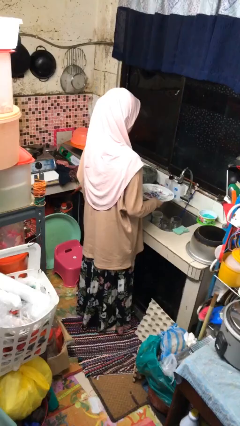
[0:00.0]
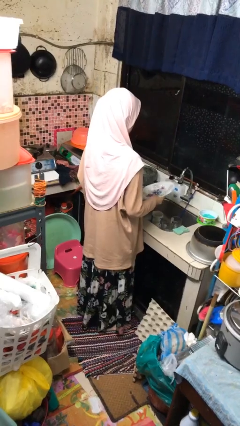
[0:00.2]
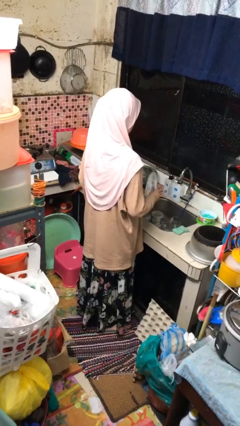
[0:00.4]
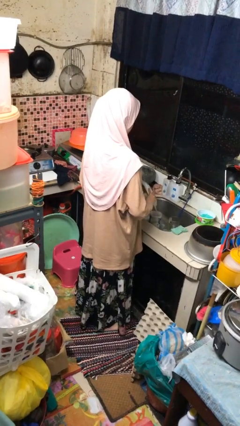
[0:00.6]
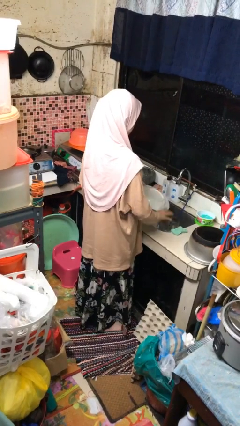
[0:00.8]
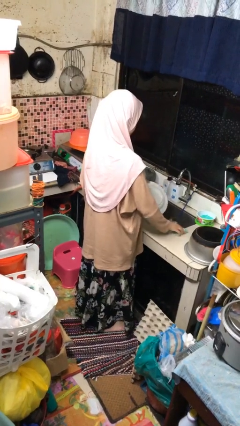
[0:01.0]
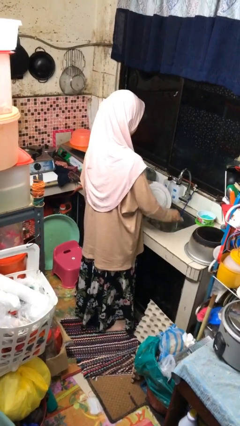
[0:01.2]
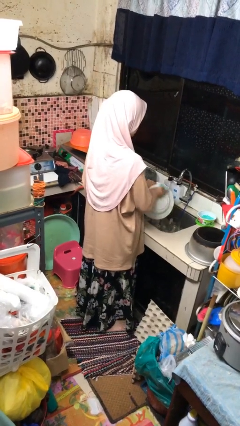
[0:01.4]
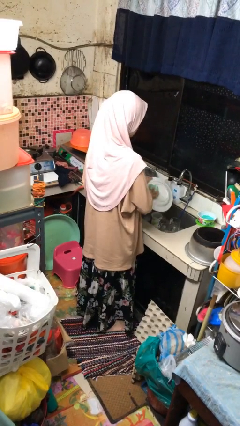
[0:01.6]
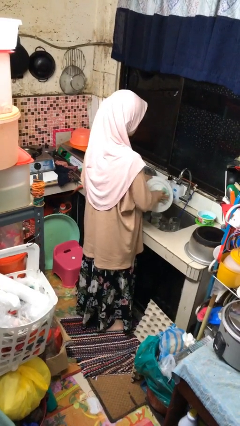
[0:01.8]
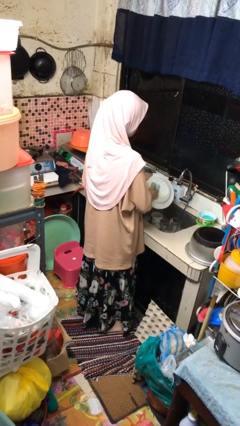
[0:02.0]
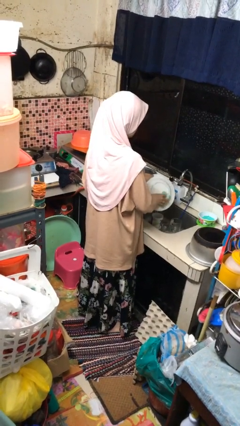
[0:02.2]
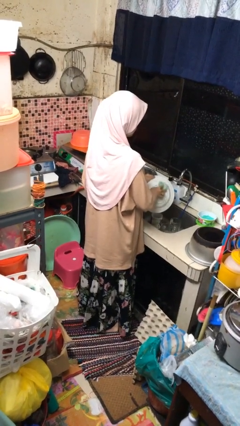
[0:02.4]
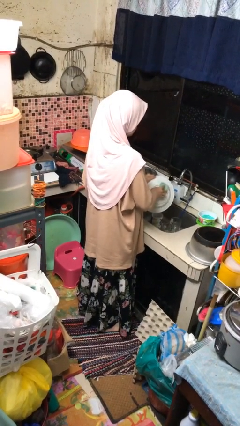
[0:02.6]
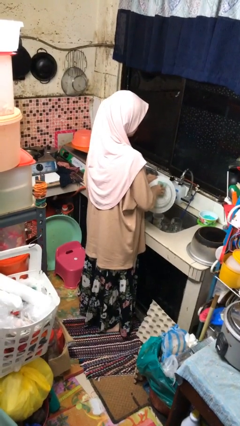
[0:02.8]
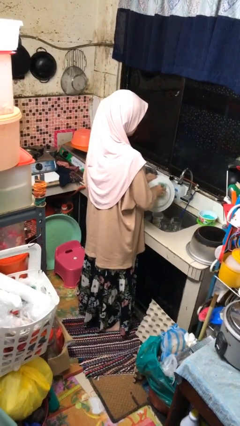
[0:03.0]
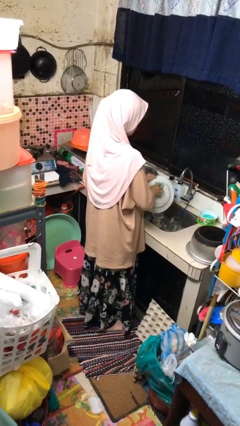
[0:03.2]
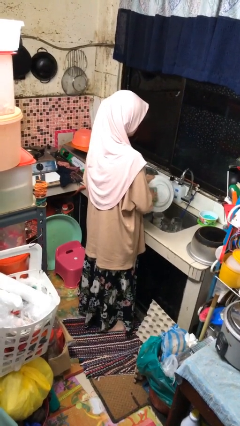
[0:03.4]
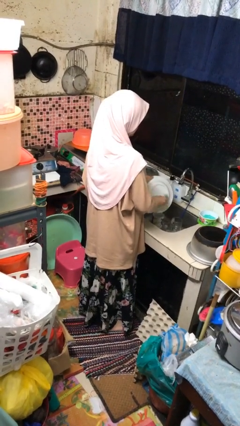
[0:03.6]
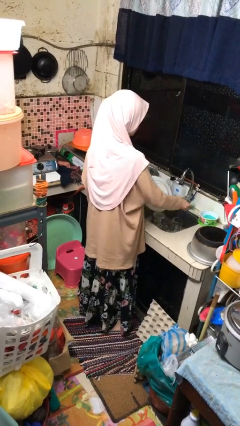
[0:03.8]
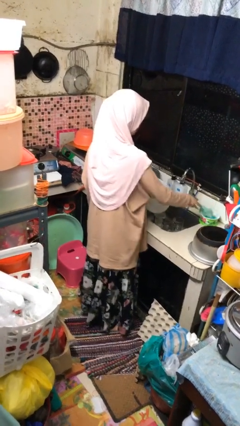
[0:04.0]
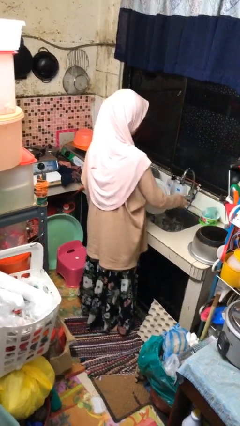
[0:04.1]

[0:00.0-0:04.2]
person washes dish

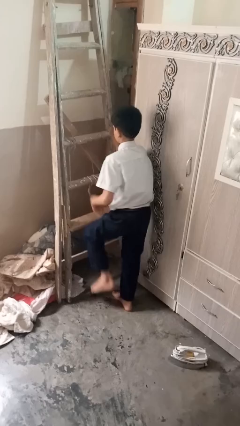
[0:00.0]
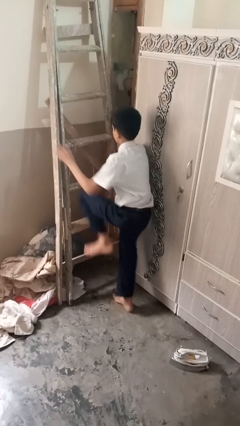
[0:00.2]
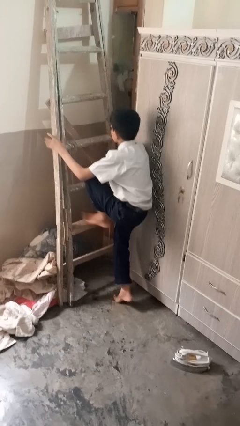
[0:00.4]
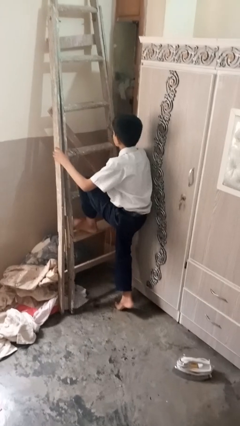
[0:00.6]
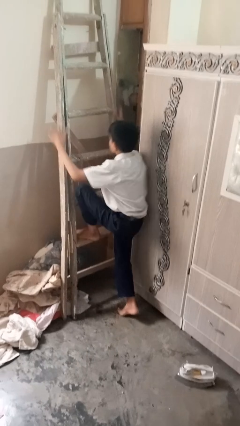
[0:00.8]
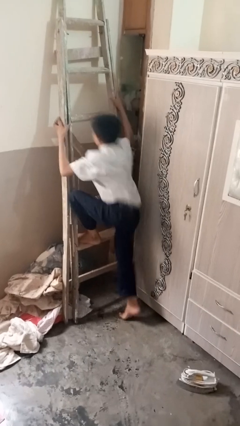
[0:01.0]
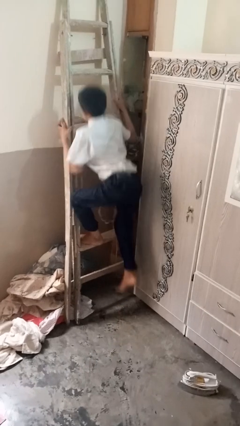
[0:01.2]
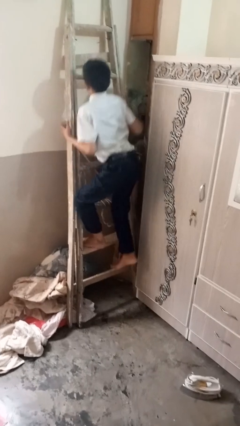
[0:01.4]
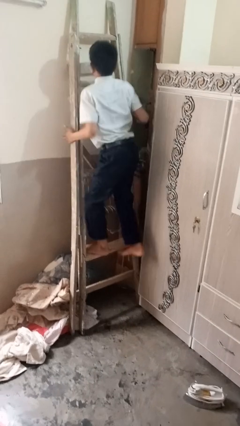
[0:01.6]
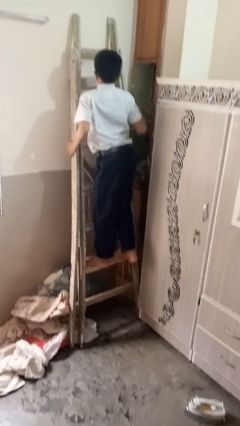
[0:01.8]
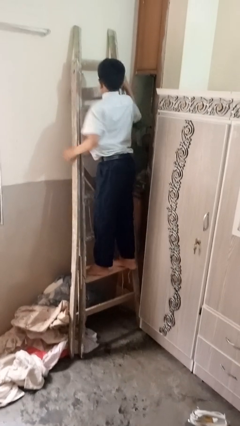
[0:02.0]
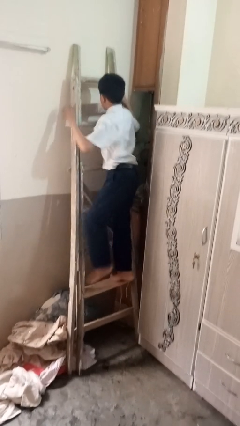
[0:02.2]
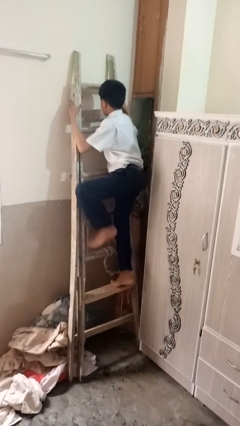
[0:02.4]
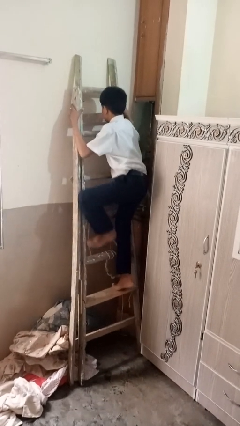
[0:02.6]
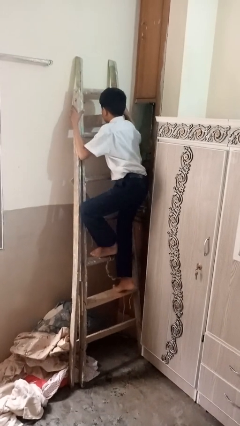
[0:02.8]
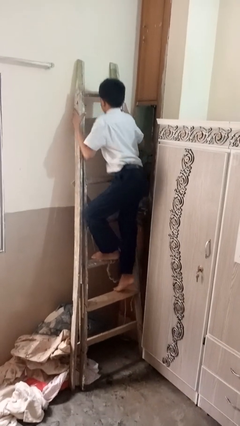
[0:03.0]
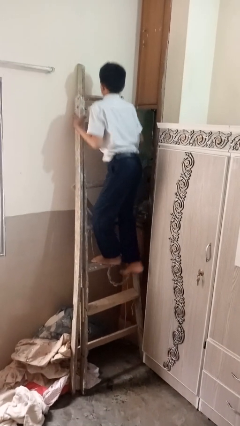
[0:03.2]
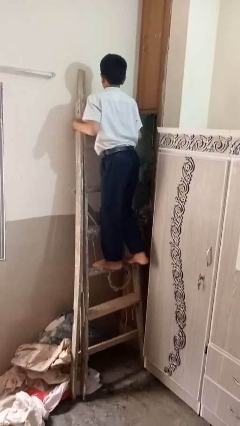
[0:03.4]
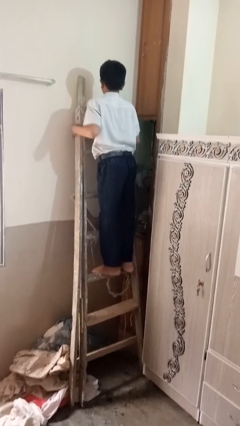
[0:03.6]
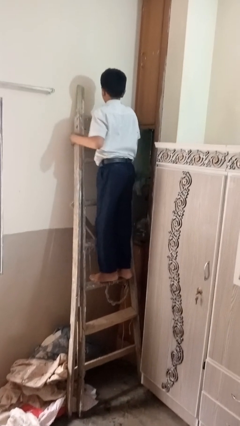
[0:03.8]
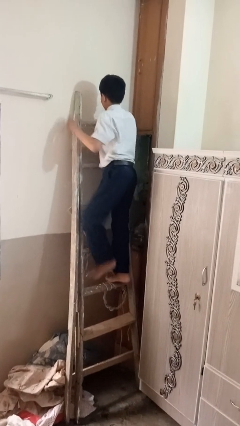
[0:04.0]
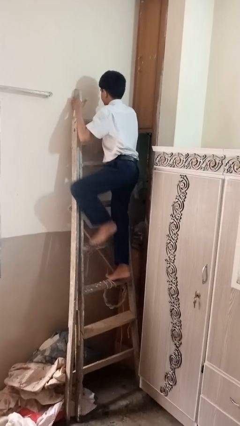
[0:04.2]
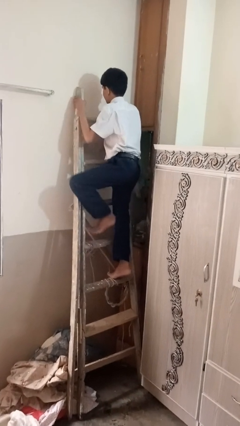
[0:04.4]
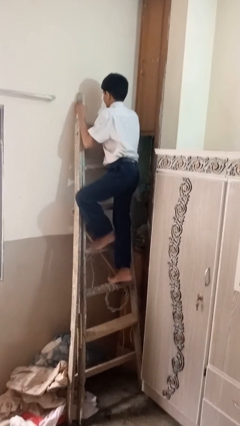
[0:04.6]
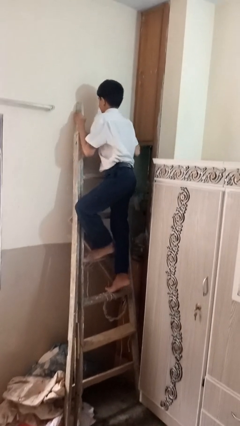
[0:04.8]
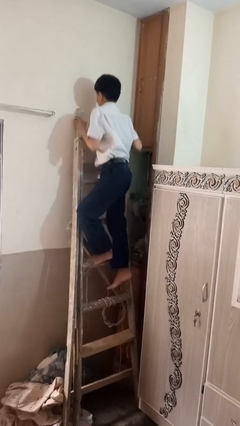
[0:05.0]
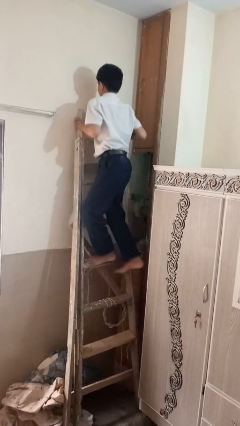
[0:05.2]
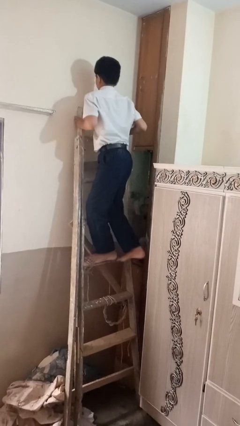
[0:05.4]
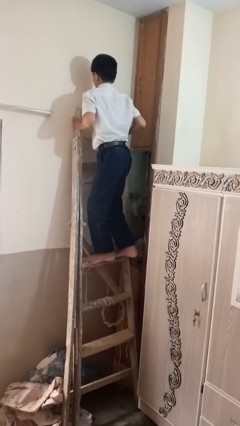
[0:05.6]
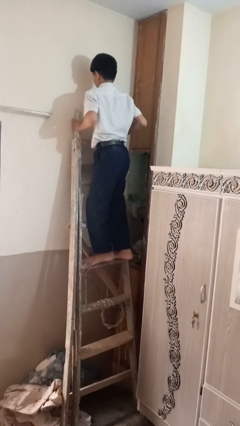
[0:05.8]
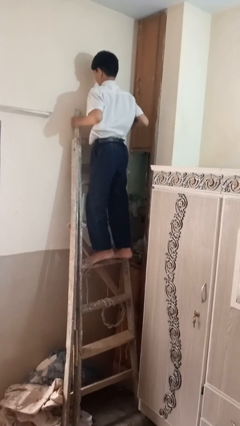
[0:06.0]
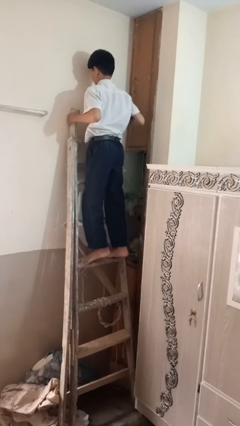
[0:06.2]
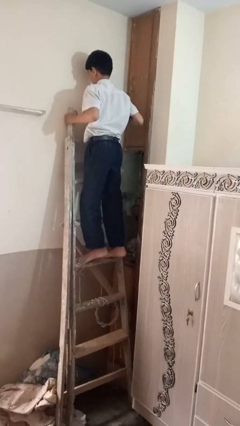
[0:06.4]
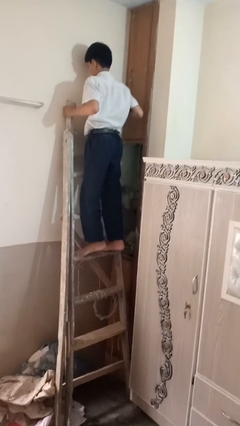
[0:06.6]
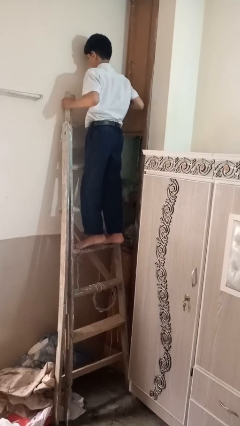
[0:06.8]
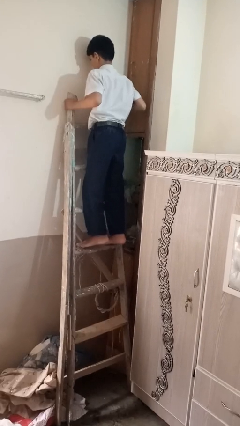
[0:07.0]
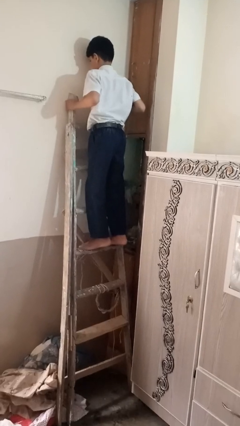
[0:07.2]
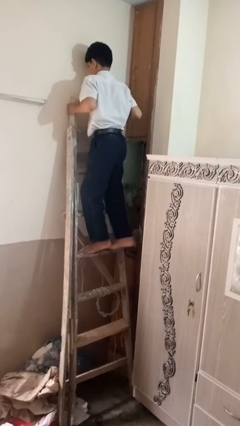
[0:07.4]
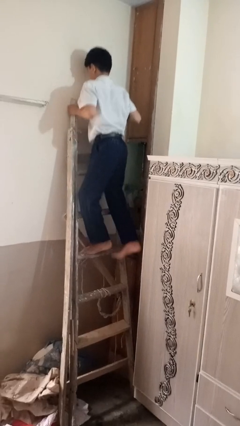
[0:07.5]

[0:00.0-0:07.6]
person climbs up ladder

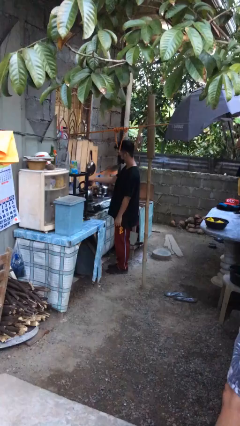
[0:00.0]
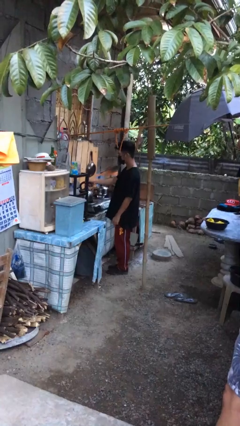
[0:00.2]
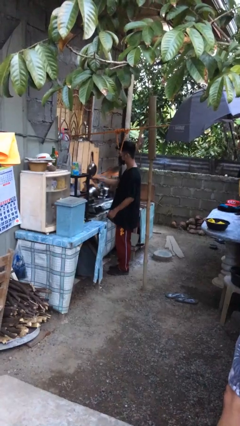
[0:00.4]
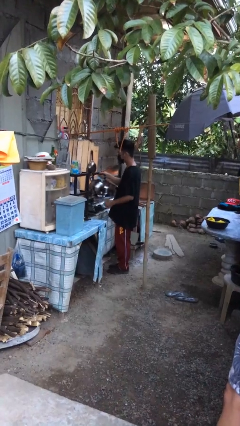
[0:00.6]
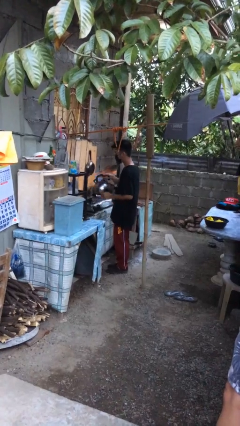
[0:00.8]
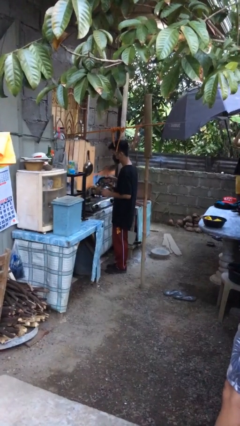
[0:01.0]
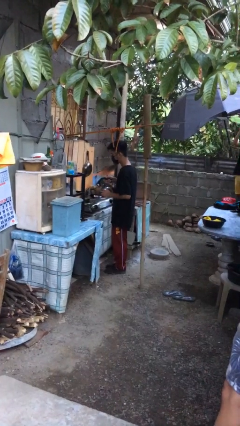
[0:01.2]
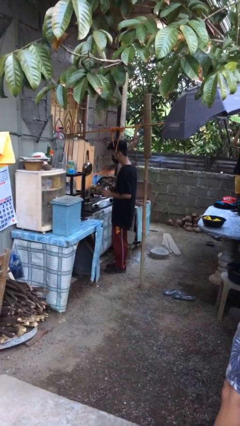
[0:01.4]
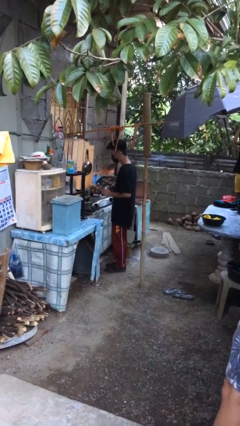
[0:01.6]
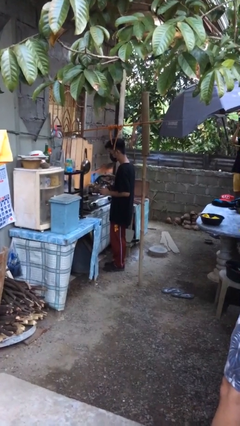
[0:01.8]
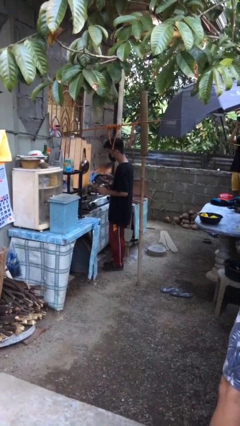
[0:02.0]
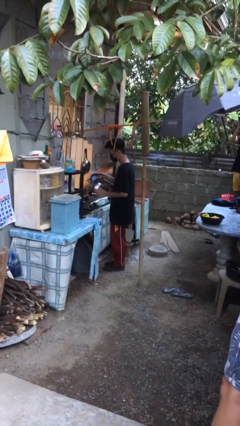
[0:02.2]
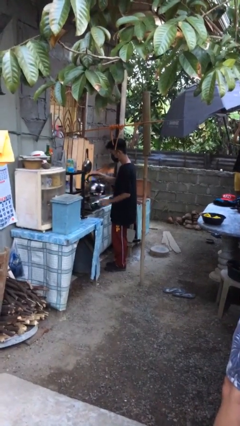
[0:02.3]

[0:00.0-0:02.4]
person picks up object from countertop

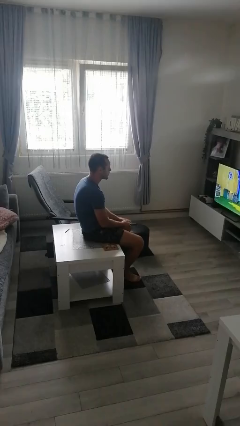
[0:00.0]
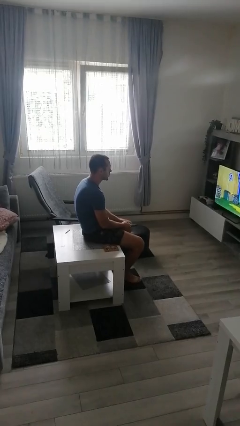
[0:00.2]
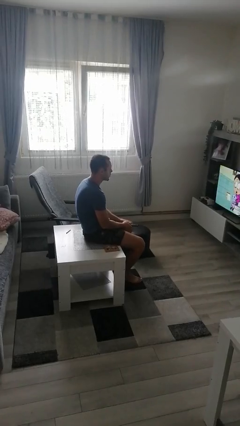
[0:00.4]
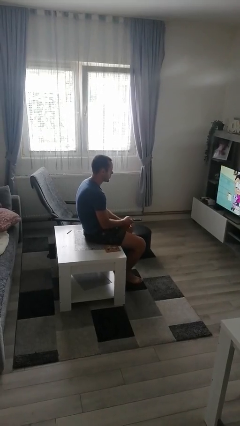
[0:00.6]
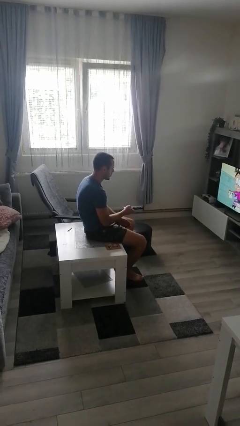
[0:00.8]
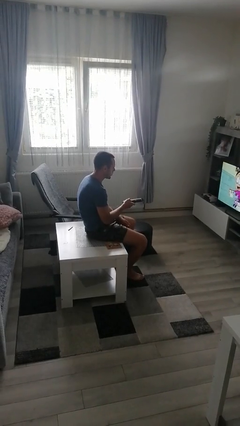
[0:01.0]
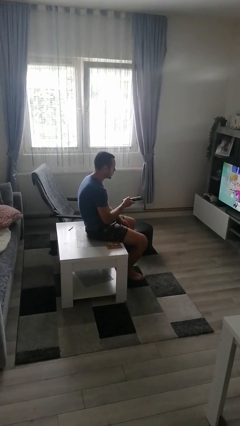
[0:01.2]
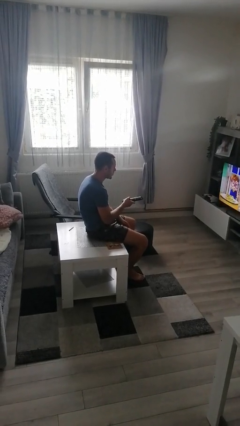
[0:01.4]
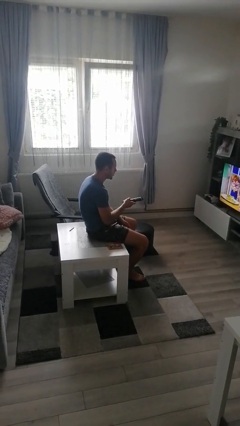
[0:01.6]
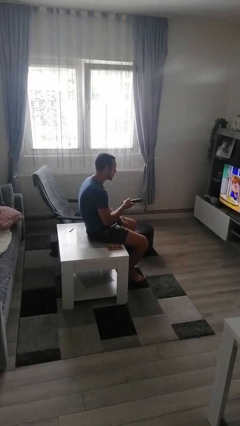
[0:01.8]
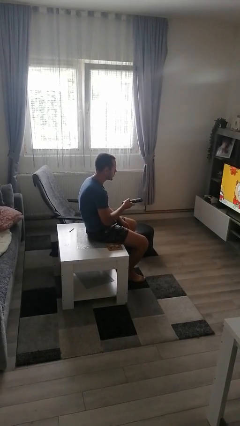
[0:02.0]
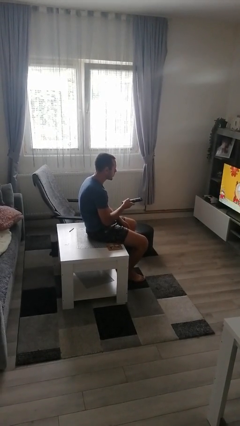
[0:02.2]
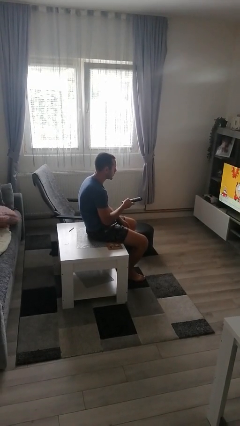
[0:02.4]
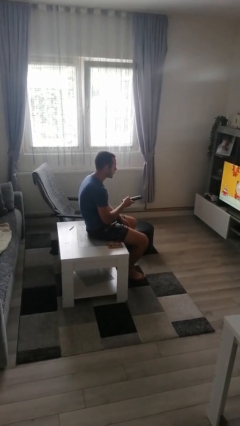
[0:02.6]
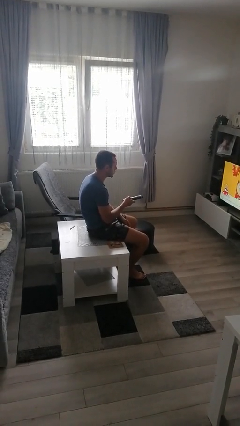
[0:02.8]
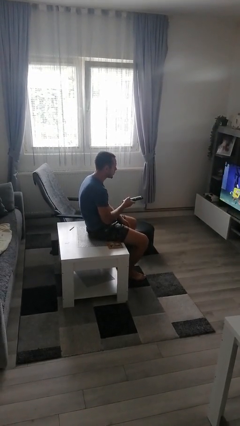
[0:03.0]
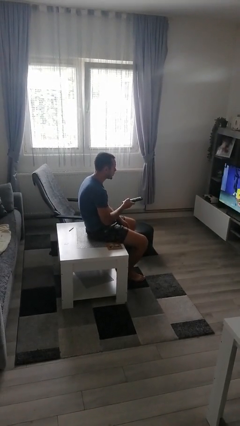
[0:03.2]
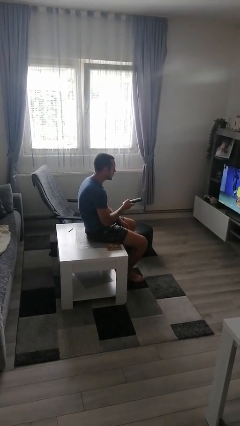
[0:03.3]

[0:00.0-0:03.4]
person uses television remote

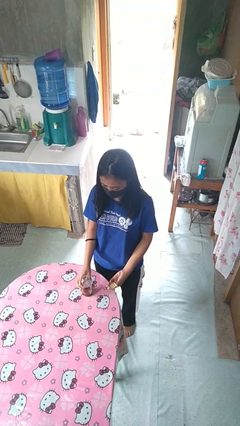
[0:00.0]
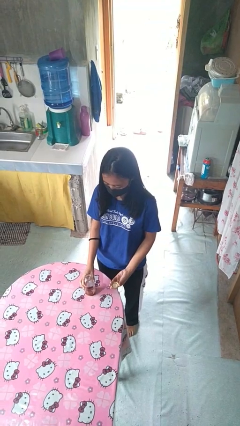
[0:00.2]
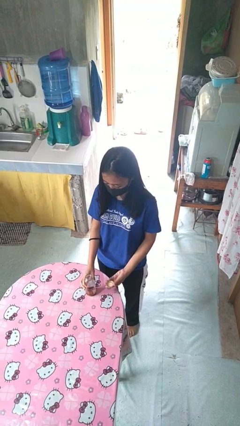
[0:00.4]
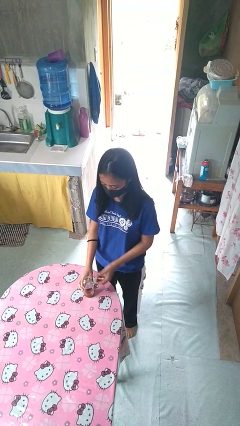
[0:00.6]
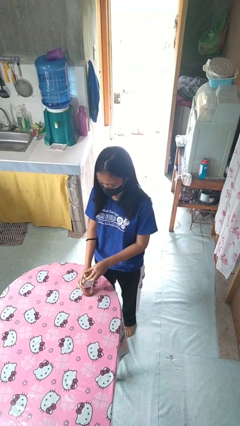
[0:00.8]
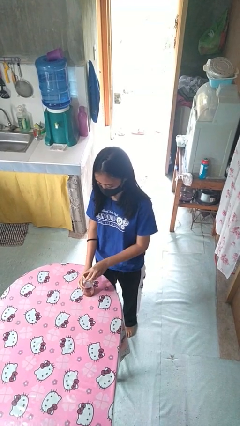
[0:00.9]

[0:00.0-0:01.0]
person closes jar
